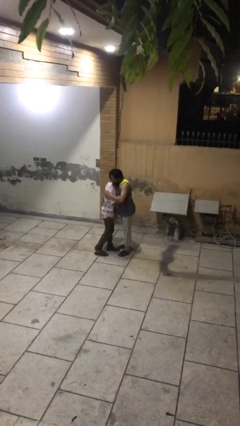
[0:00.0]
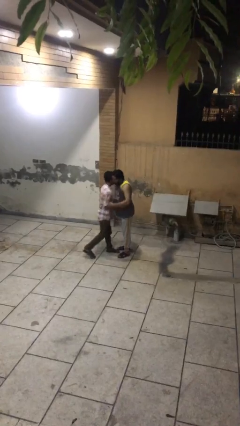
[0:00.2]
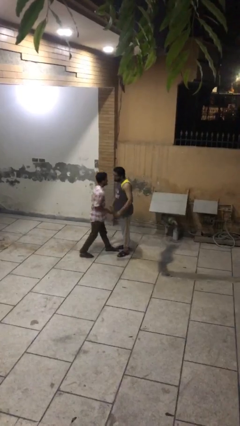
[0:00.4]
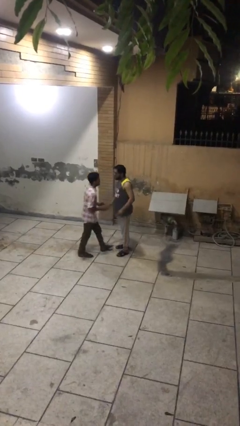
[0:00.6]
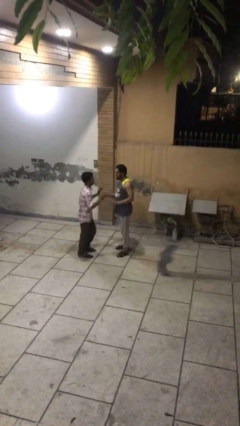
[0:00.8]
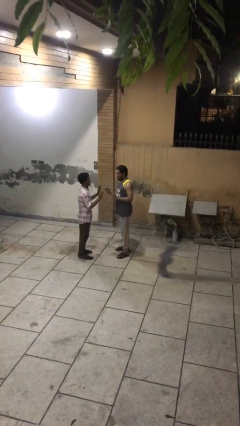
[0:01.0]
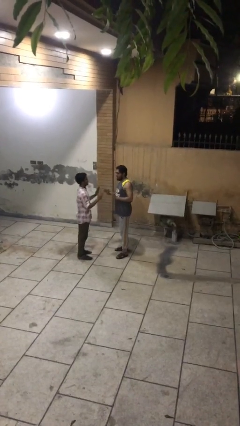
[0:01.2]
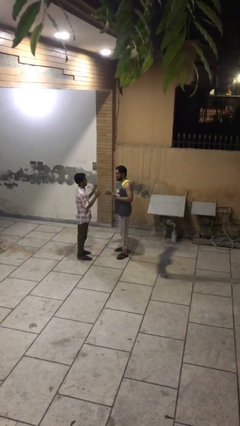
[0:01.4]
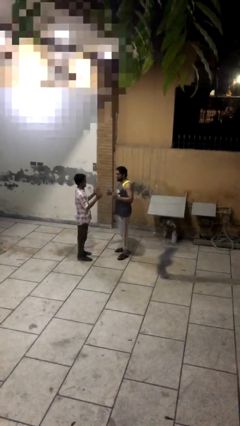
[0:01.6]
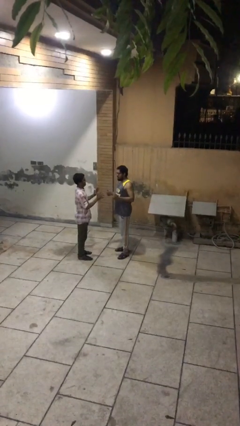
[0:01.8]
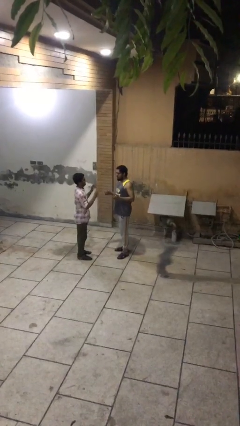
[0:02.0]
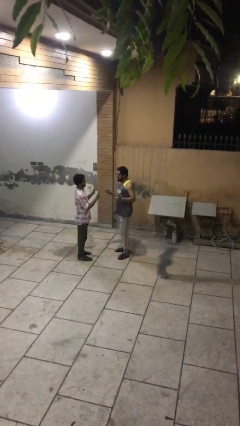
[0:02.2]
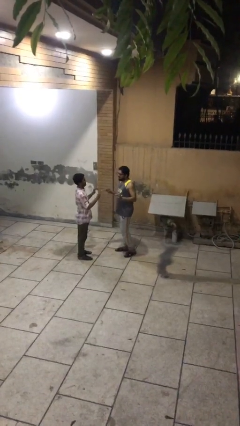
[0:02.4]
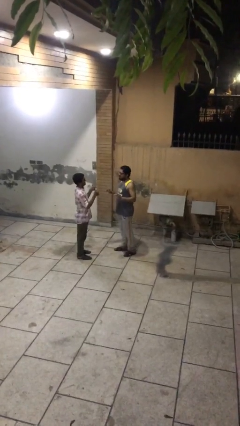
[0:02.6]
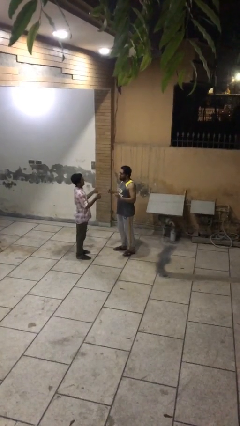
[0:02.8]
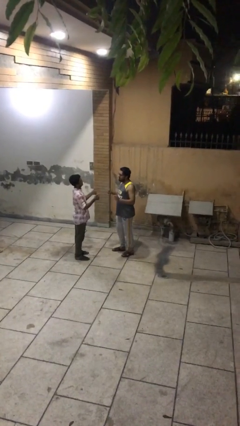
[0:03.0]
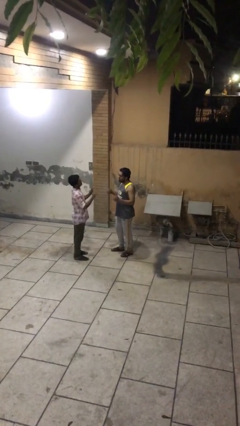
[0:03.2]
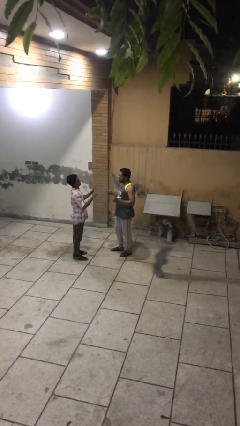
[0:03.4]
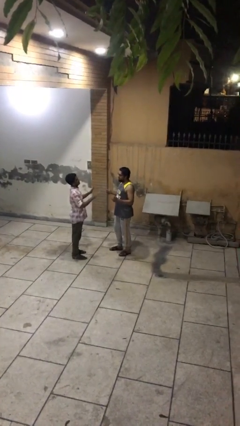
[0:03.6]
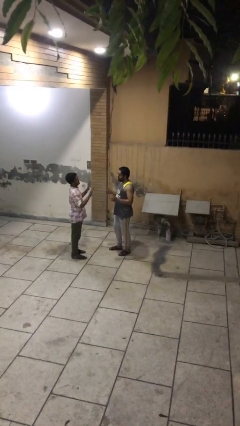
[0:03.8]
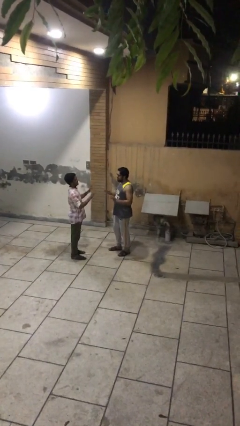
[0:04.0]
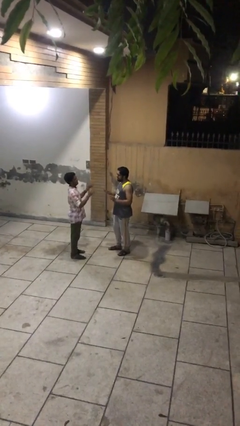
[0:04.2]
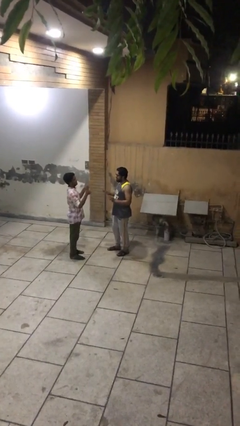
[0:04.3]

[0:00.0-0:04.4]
person talks to person

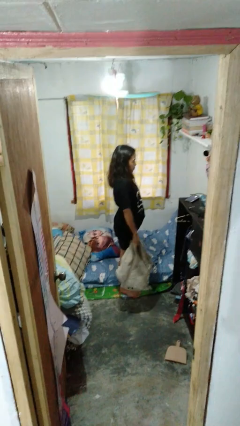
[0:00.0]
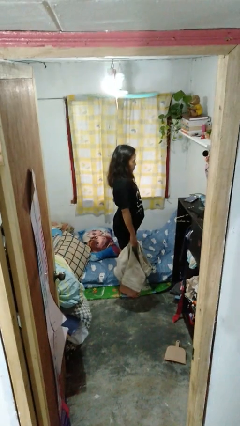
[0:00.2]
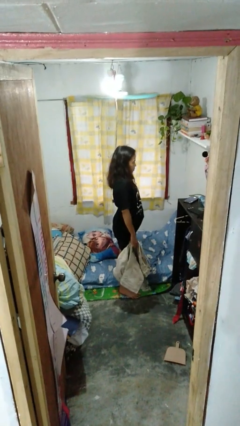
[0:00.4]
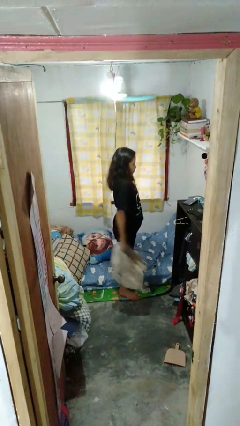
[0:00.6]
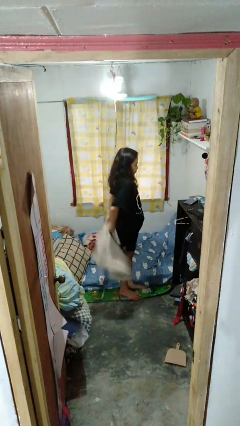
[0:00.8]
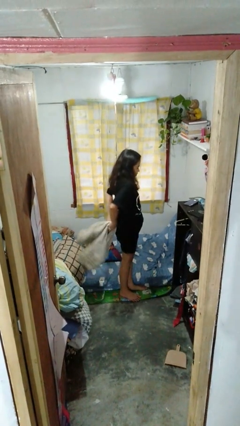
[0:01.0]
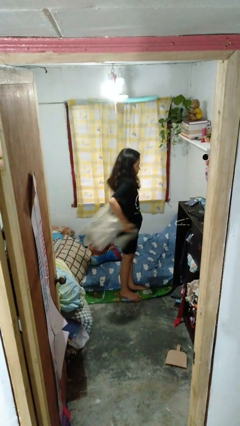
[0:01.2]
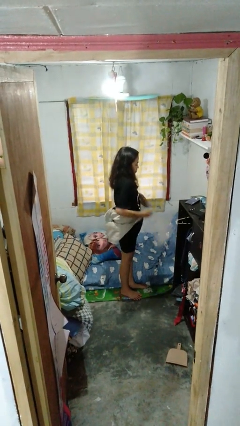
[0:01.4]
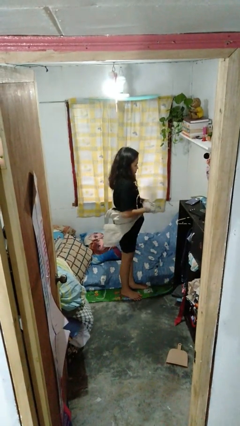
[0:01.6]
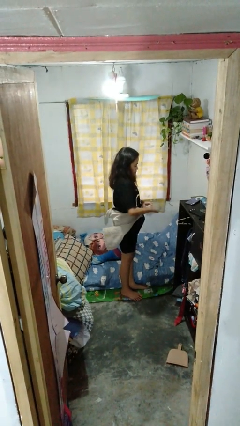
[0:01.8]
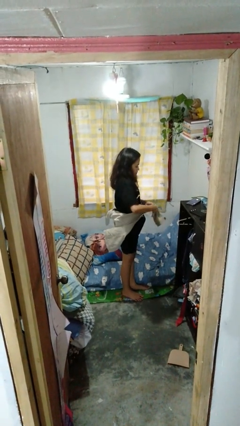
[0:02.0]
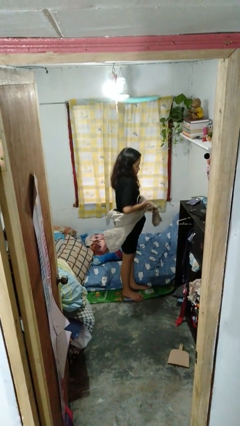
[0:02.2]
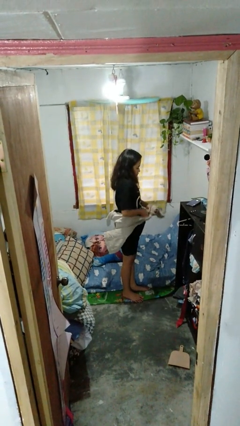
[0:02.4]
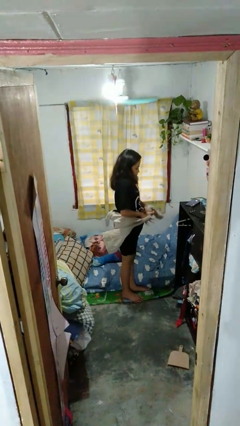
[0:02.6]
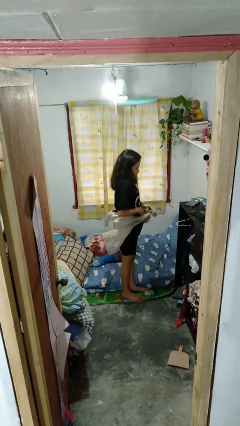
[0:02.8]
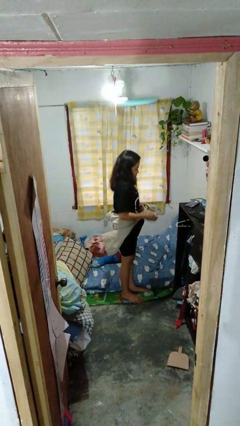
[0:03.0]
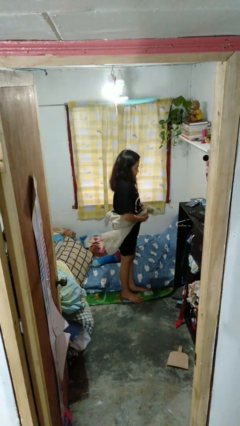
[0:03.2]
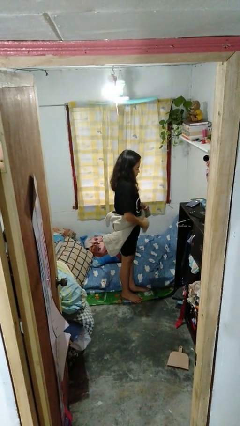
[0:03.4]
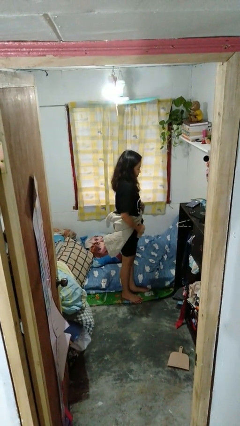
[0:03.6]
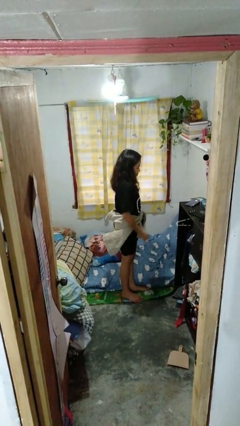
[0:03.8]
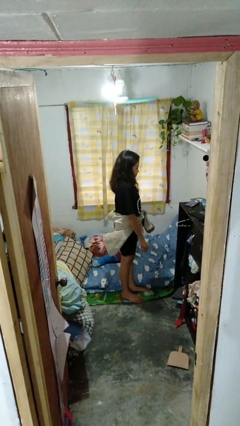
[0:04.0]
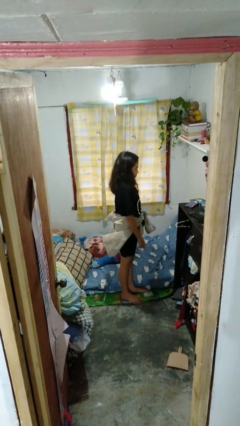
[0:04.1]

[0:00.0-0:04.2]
person ties jacket around waist

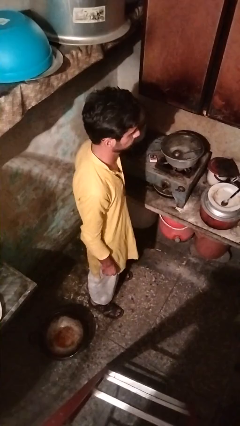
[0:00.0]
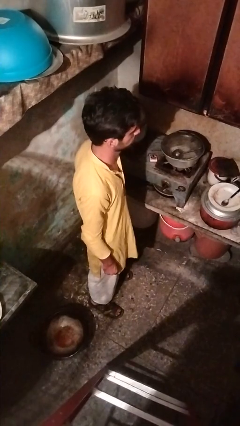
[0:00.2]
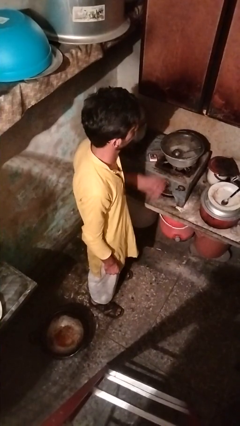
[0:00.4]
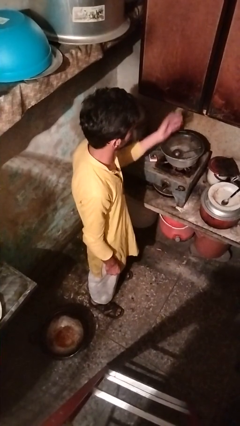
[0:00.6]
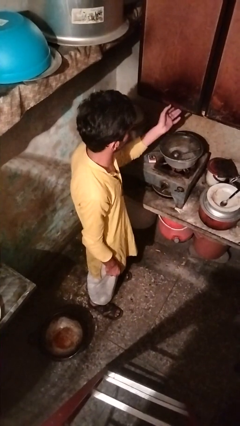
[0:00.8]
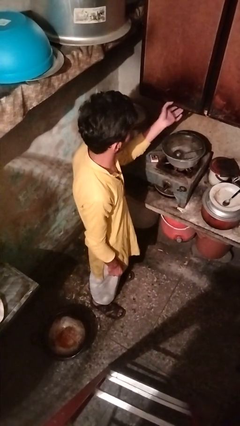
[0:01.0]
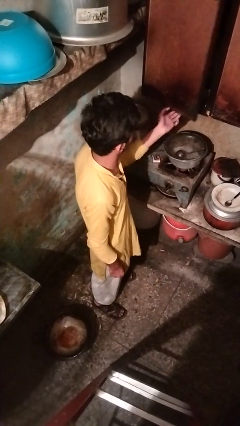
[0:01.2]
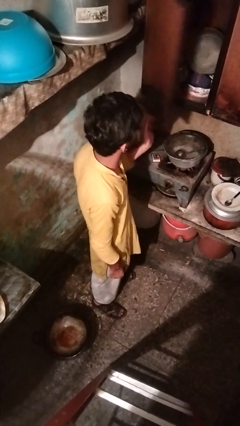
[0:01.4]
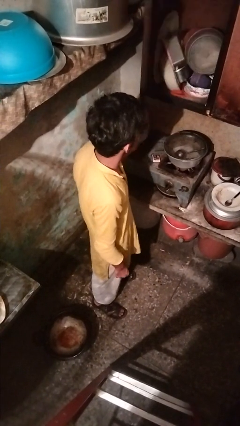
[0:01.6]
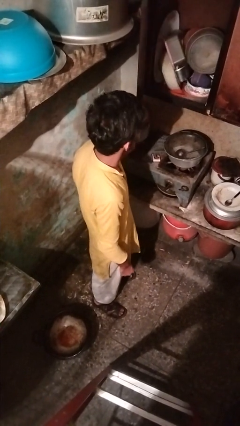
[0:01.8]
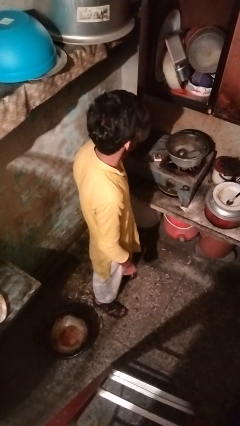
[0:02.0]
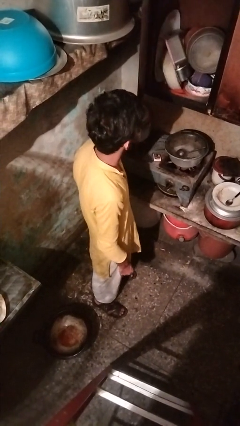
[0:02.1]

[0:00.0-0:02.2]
person opens cabinet

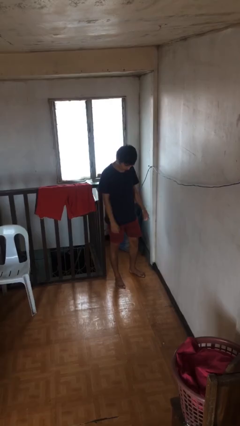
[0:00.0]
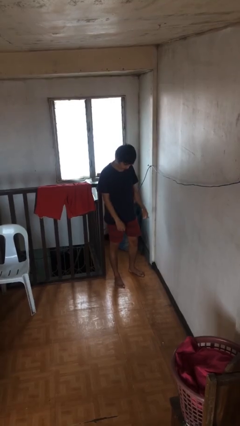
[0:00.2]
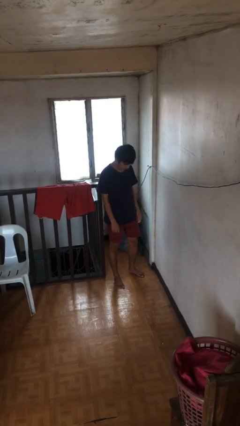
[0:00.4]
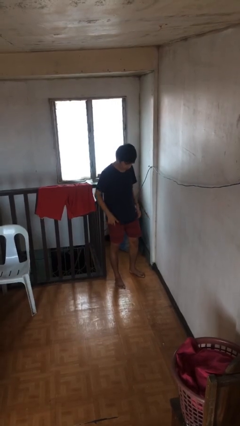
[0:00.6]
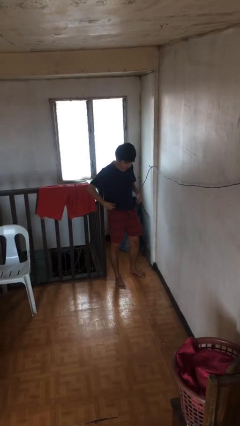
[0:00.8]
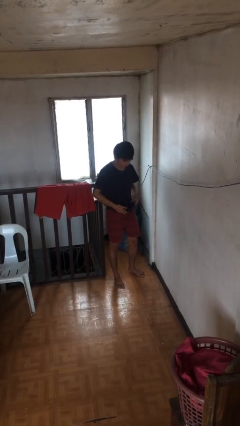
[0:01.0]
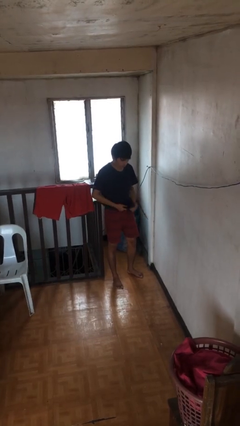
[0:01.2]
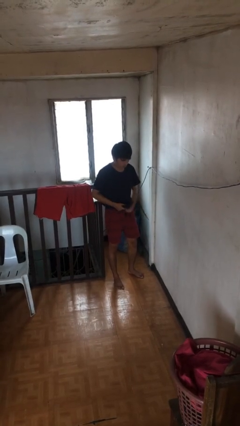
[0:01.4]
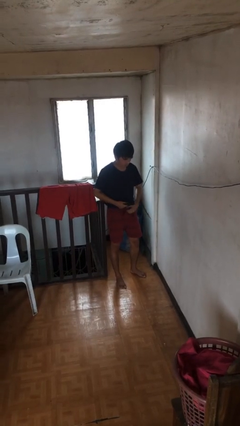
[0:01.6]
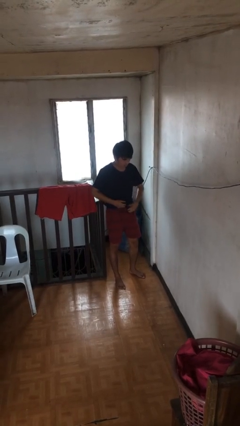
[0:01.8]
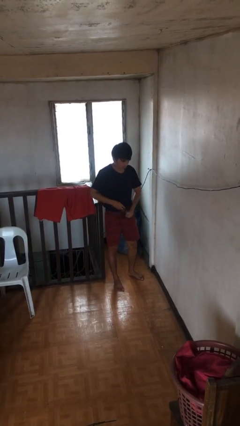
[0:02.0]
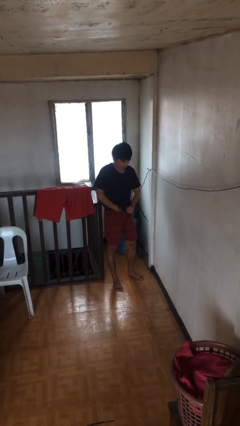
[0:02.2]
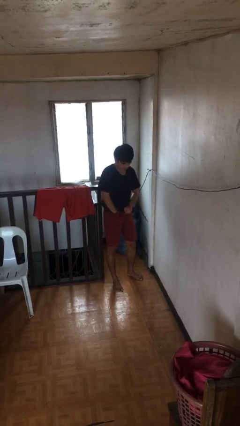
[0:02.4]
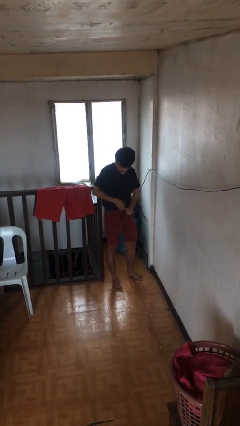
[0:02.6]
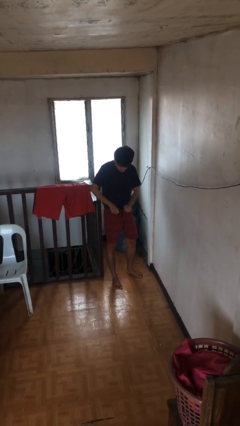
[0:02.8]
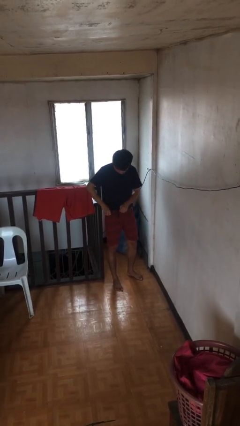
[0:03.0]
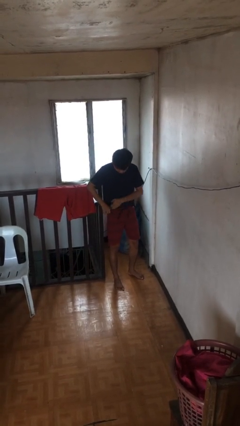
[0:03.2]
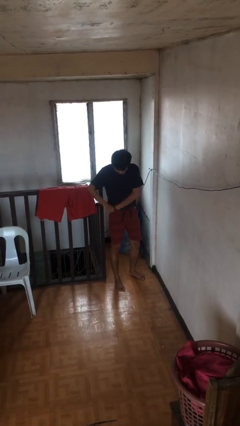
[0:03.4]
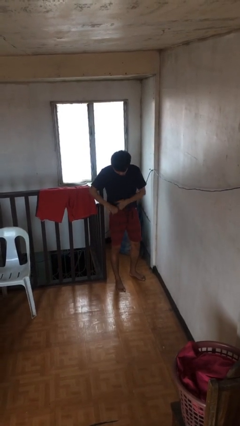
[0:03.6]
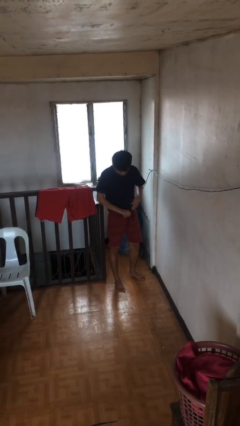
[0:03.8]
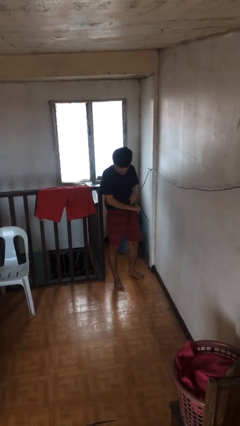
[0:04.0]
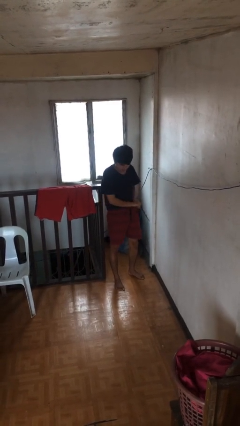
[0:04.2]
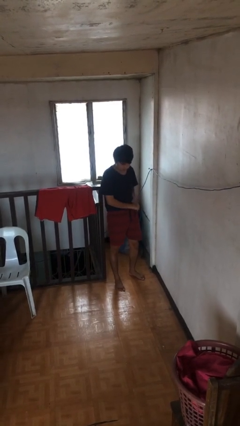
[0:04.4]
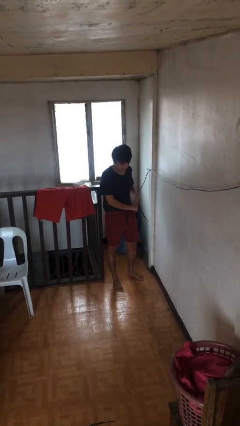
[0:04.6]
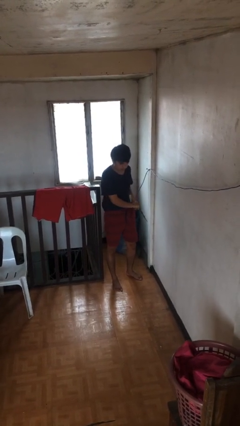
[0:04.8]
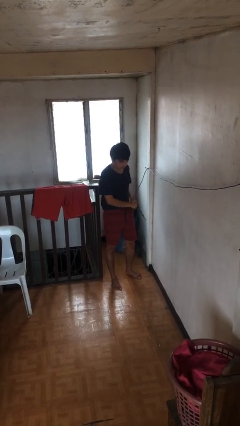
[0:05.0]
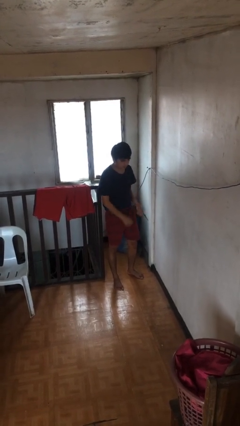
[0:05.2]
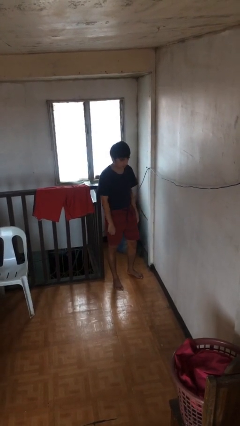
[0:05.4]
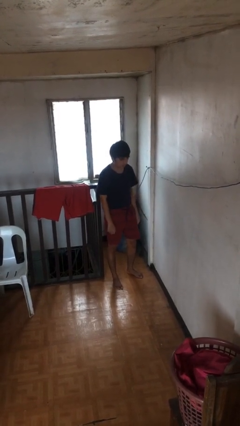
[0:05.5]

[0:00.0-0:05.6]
person tucks in shirt

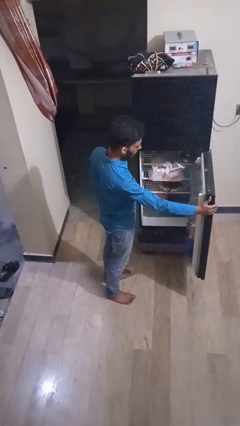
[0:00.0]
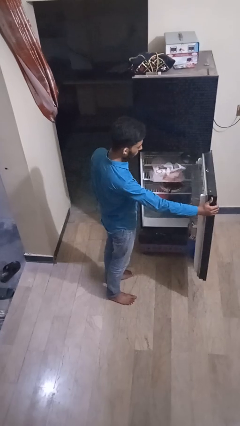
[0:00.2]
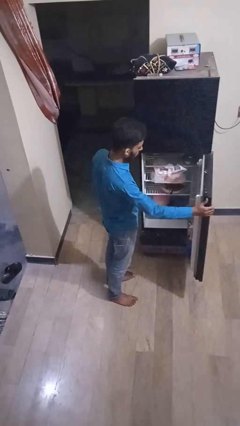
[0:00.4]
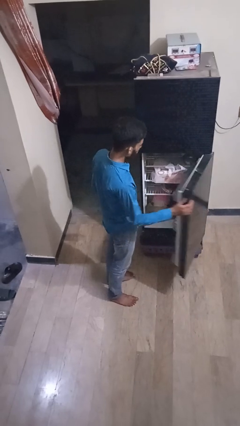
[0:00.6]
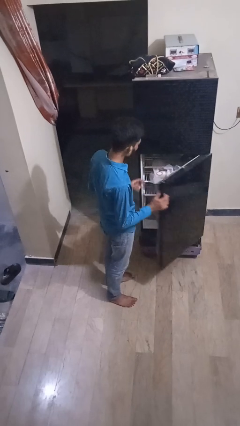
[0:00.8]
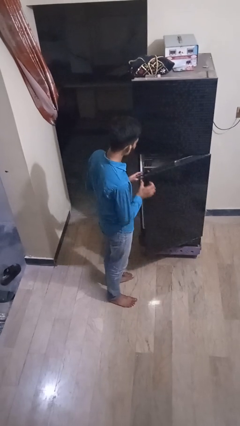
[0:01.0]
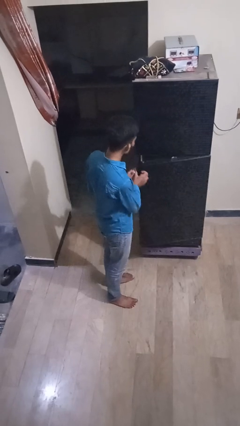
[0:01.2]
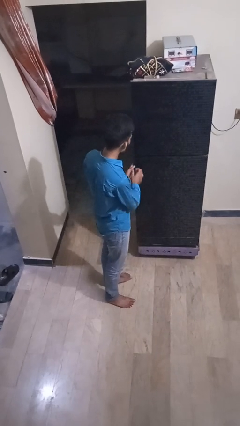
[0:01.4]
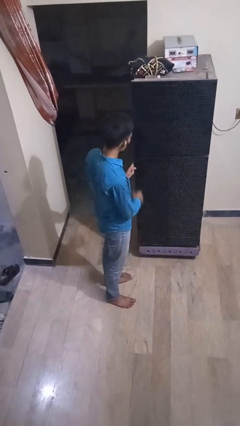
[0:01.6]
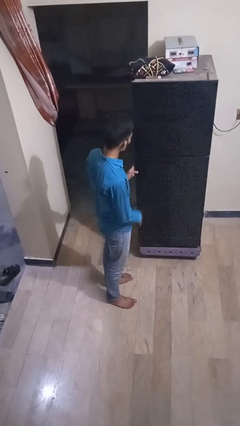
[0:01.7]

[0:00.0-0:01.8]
person closes refrigerator
